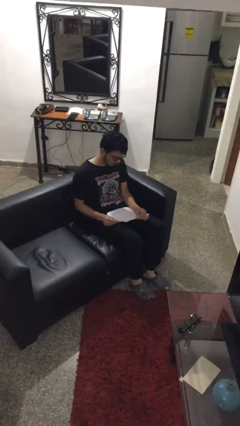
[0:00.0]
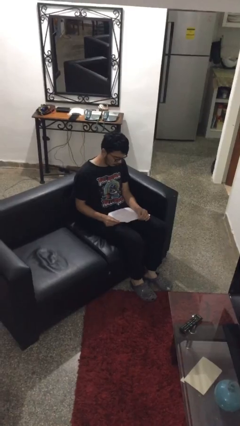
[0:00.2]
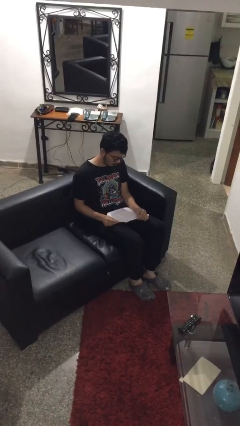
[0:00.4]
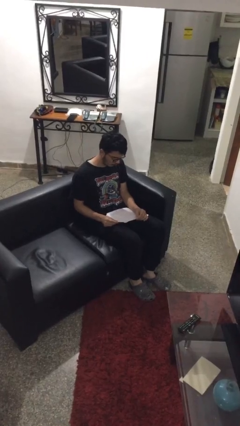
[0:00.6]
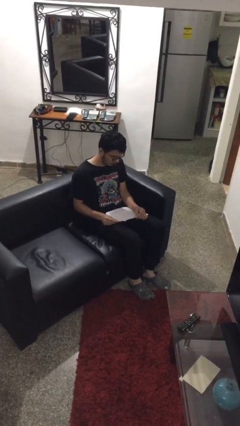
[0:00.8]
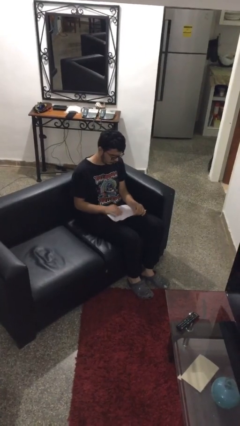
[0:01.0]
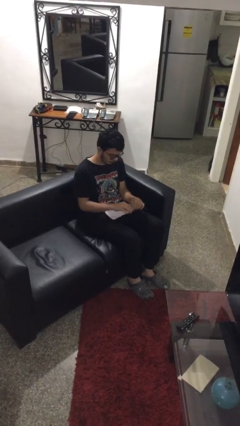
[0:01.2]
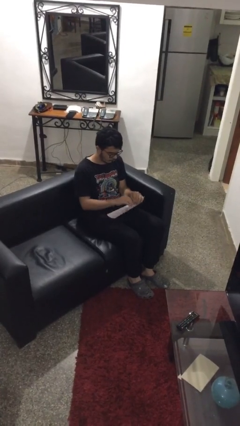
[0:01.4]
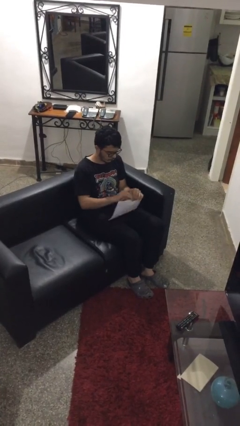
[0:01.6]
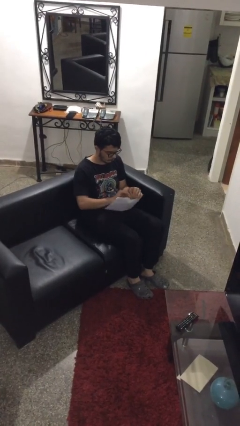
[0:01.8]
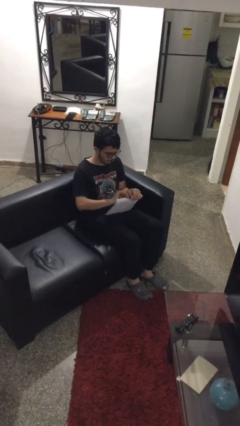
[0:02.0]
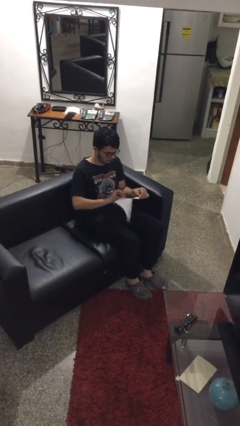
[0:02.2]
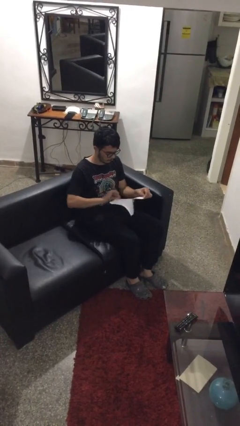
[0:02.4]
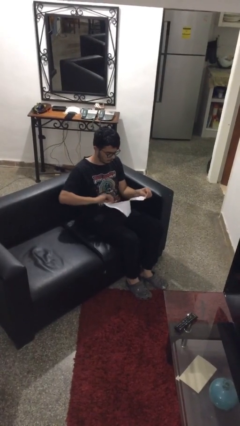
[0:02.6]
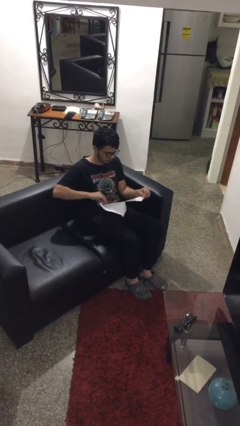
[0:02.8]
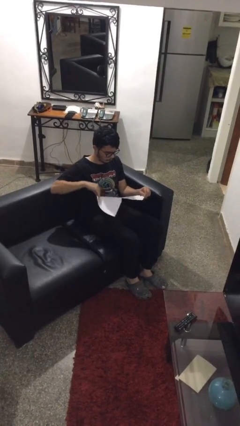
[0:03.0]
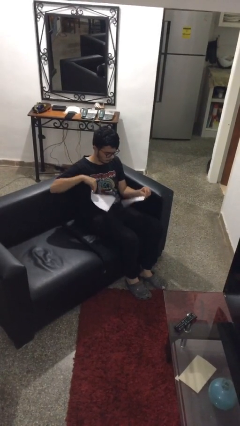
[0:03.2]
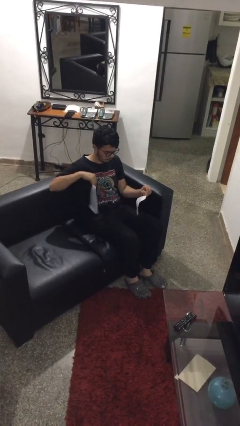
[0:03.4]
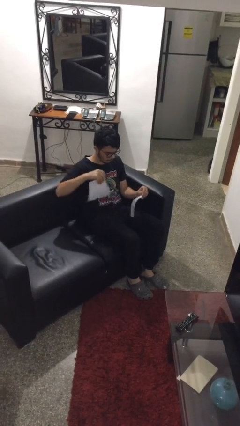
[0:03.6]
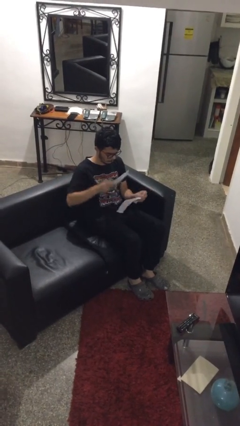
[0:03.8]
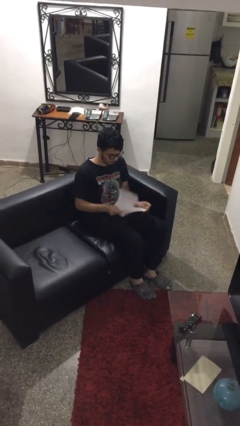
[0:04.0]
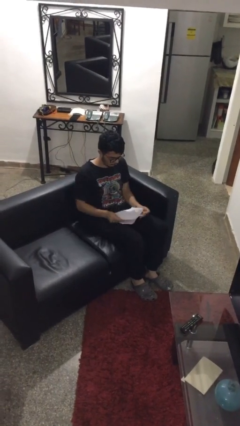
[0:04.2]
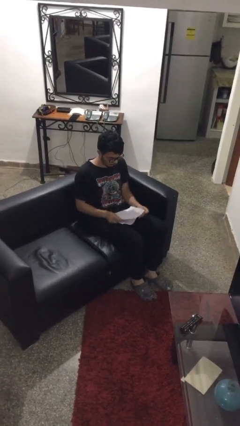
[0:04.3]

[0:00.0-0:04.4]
person tears paper

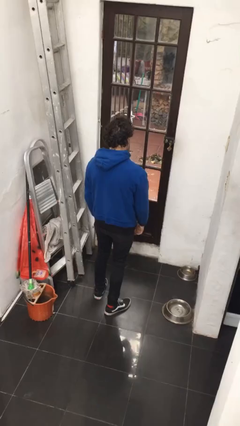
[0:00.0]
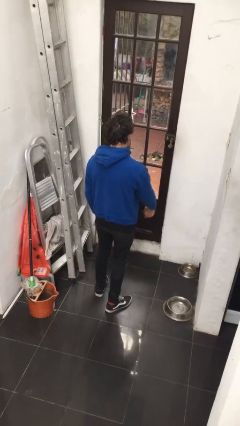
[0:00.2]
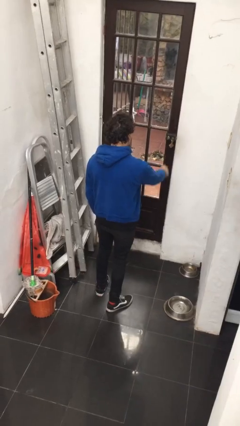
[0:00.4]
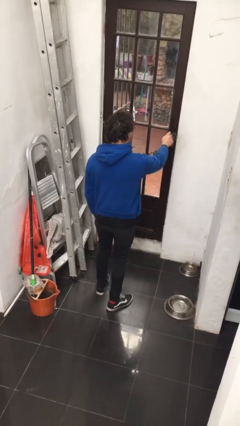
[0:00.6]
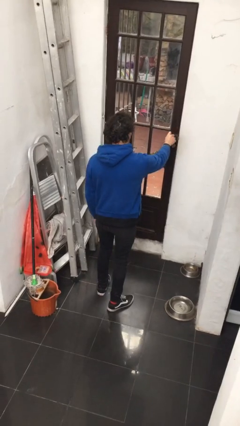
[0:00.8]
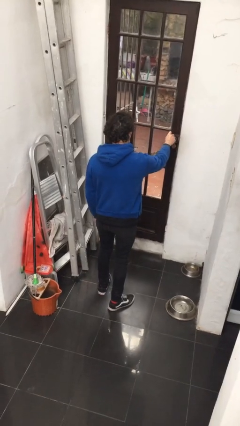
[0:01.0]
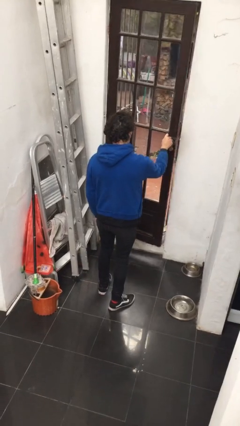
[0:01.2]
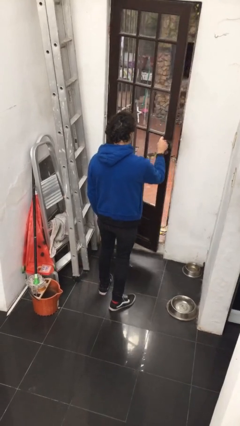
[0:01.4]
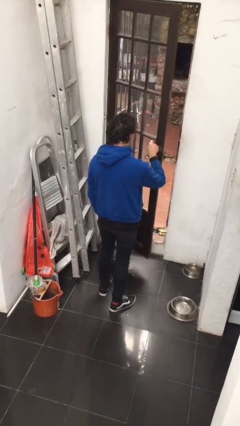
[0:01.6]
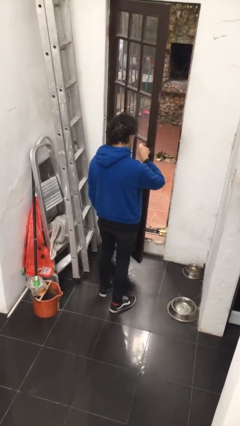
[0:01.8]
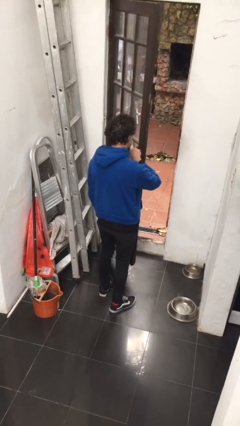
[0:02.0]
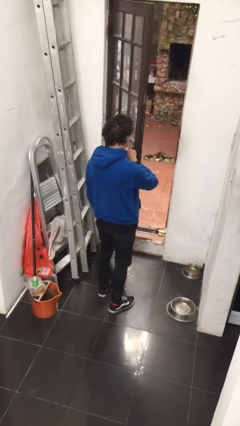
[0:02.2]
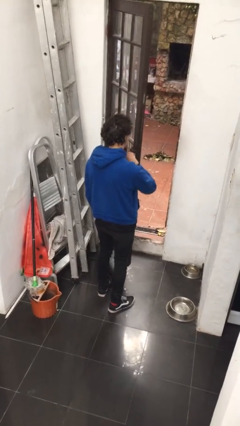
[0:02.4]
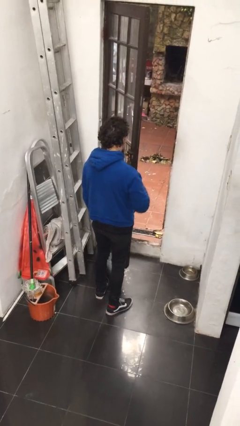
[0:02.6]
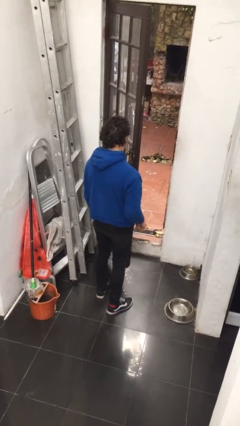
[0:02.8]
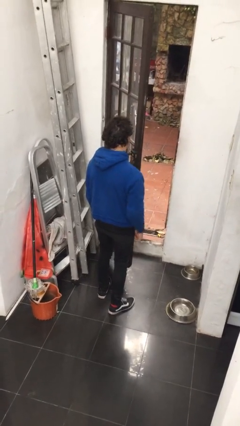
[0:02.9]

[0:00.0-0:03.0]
person opens facility door

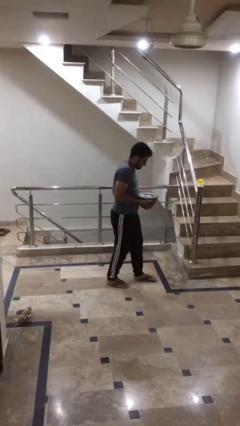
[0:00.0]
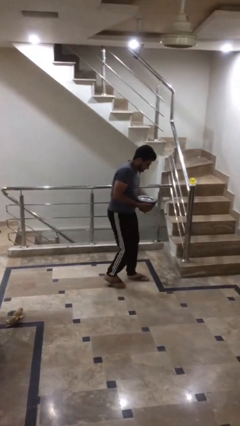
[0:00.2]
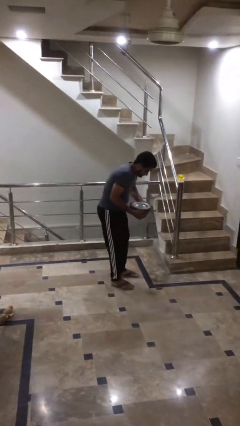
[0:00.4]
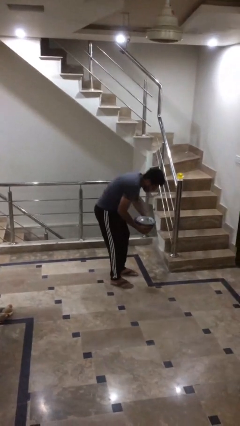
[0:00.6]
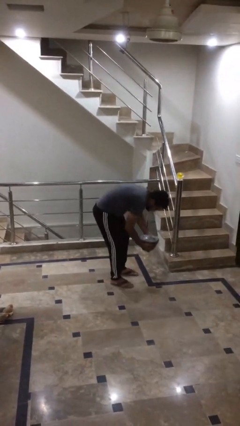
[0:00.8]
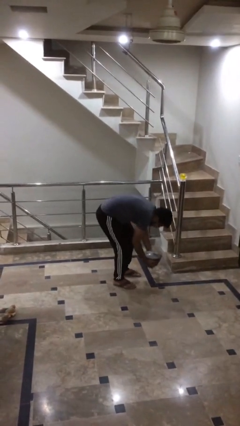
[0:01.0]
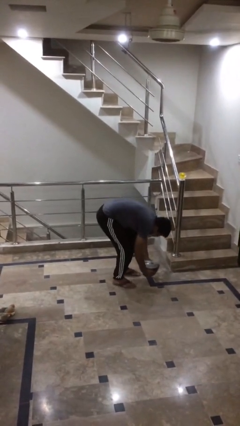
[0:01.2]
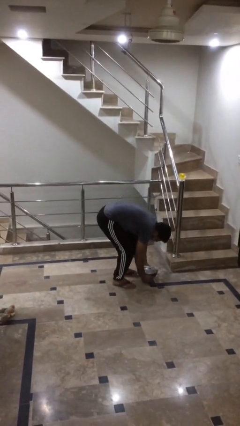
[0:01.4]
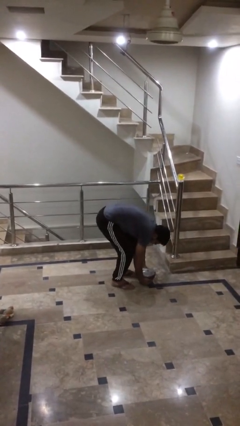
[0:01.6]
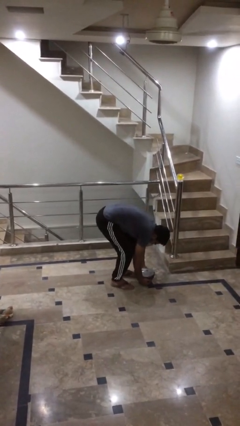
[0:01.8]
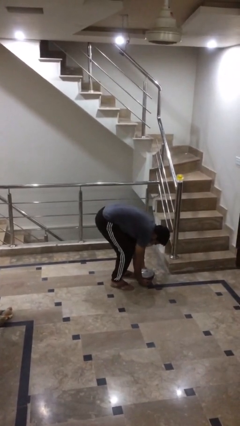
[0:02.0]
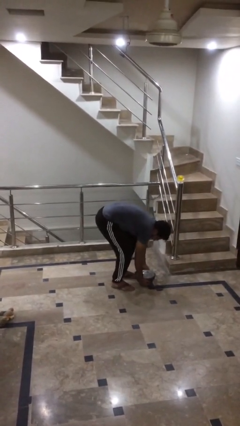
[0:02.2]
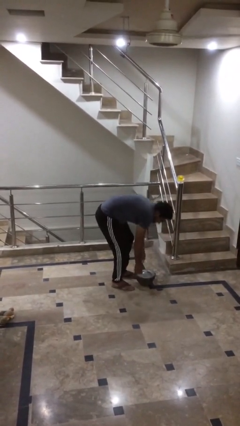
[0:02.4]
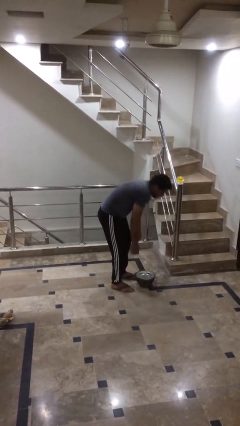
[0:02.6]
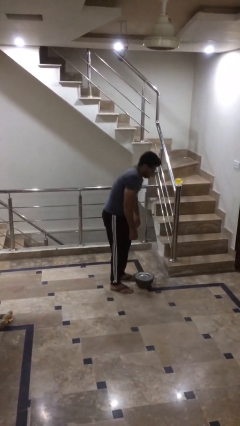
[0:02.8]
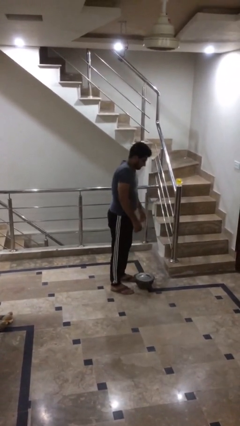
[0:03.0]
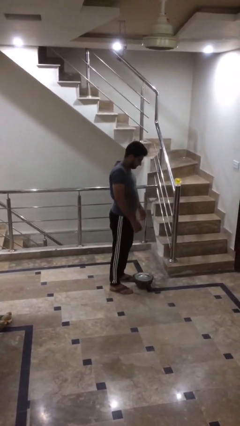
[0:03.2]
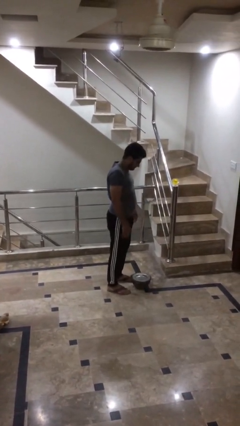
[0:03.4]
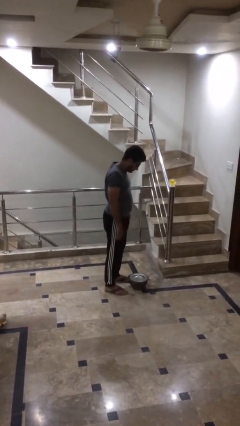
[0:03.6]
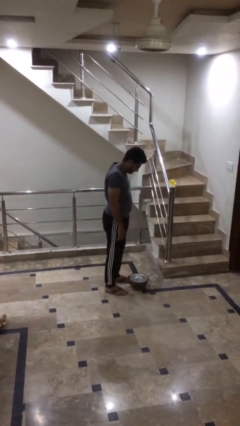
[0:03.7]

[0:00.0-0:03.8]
person puts down object on floor

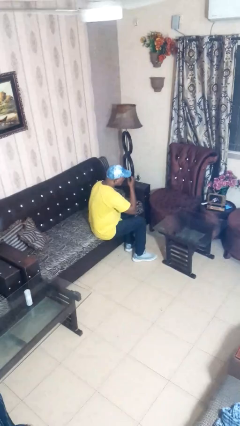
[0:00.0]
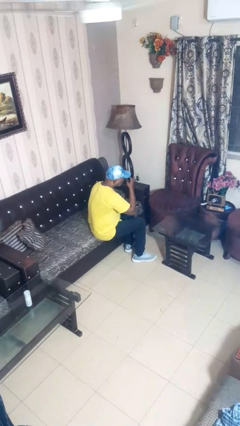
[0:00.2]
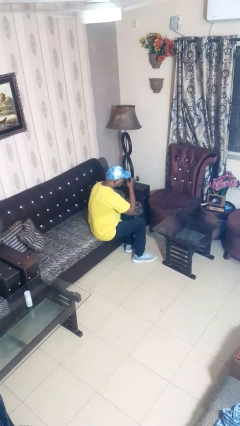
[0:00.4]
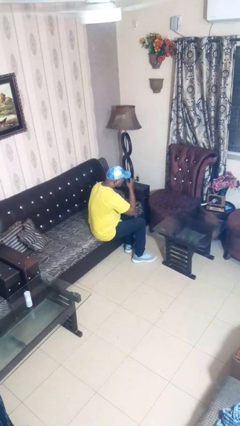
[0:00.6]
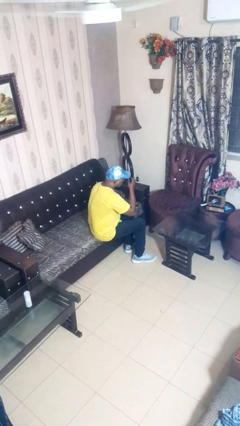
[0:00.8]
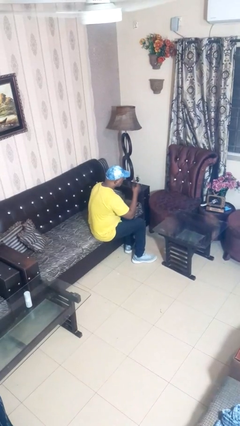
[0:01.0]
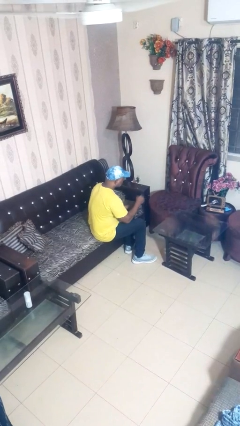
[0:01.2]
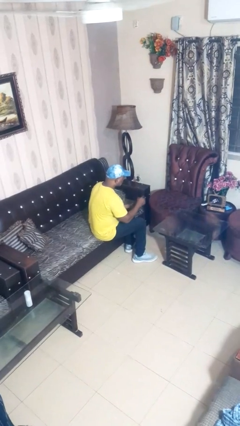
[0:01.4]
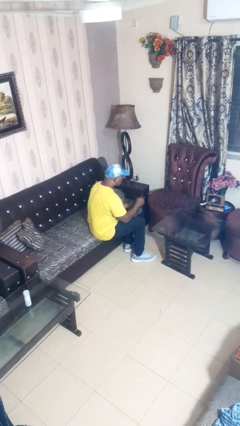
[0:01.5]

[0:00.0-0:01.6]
person applies eye makeup

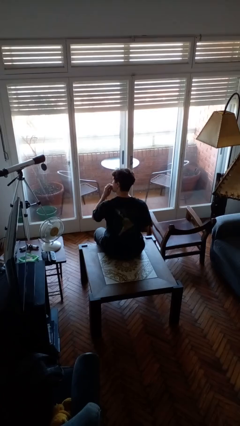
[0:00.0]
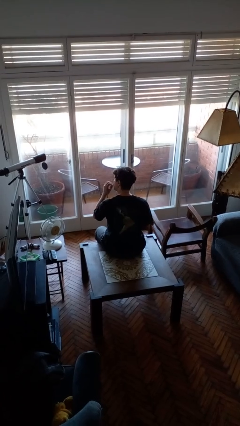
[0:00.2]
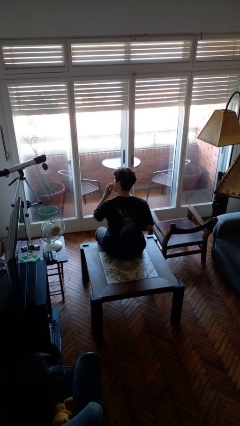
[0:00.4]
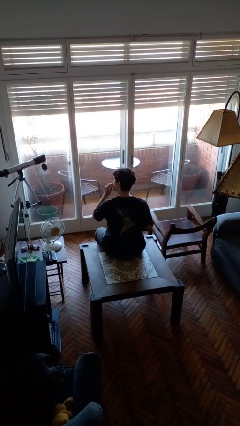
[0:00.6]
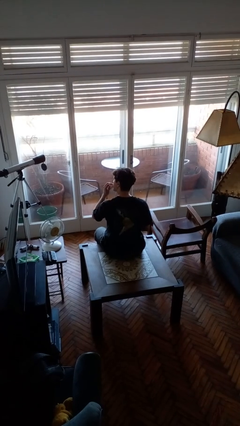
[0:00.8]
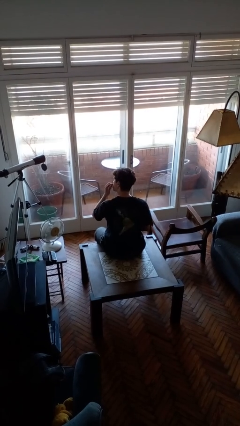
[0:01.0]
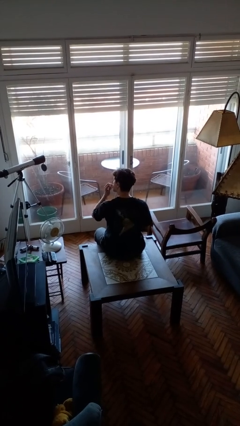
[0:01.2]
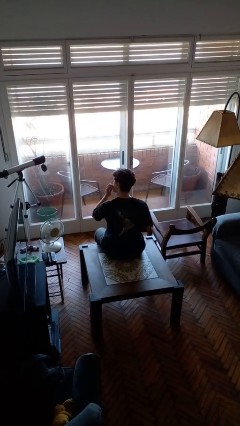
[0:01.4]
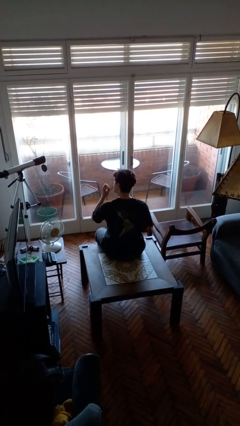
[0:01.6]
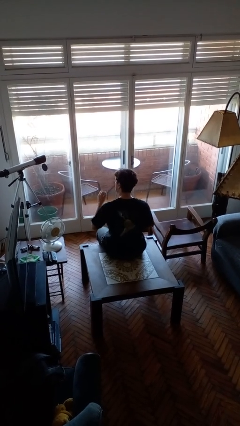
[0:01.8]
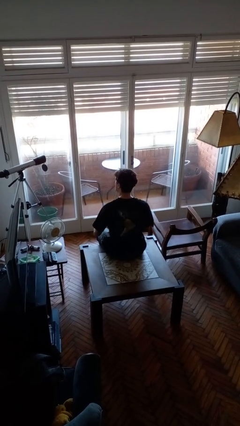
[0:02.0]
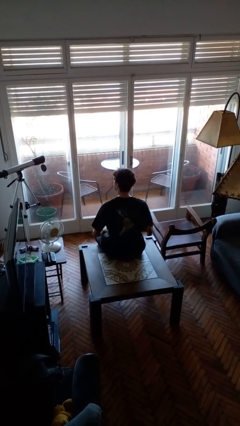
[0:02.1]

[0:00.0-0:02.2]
person licks fingers

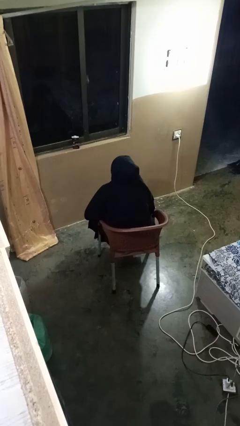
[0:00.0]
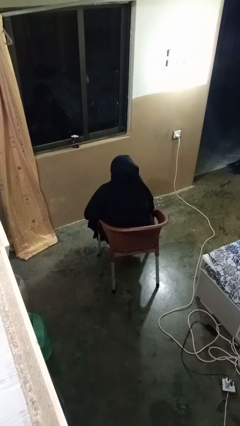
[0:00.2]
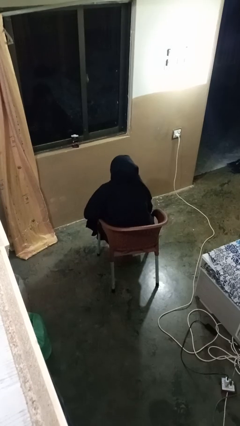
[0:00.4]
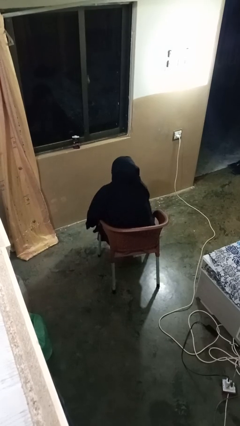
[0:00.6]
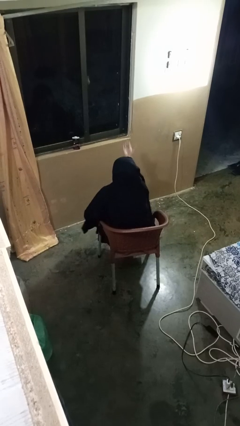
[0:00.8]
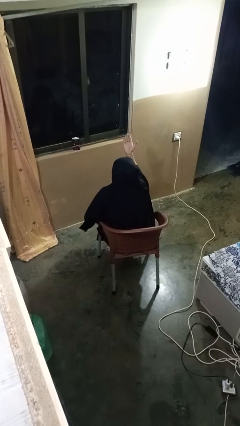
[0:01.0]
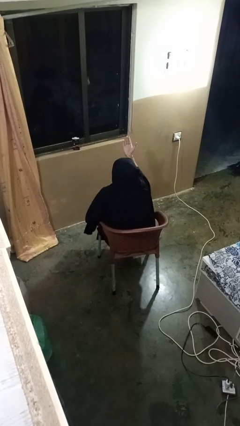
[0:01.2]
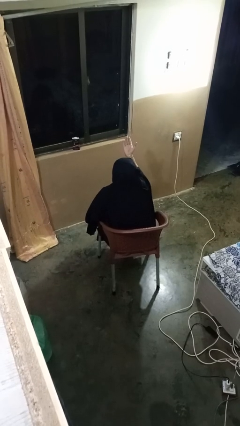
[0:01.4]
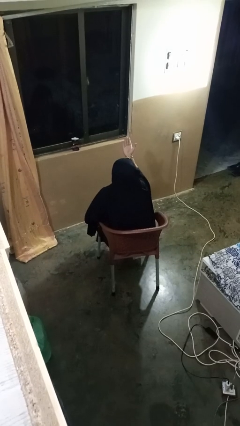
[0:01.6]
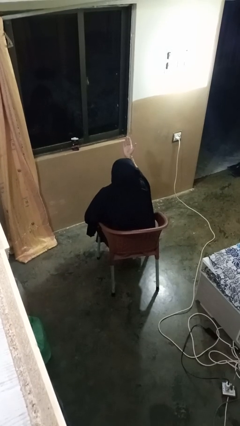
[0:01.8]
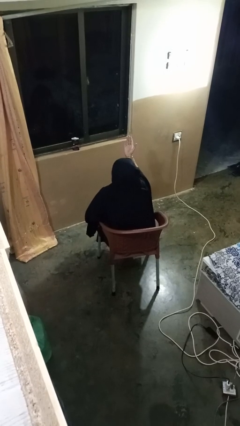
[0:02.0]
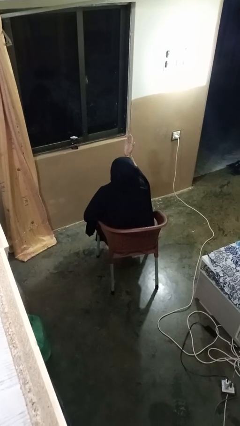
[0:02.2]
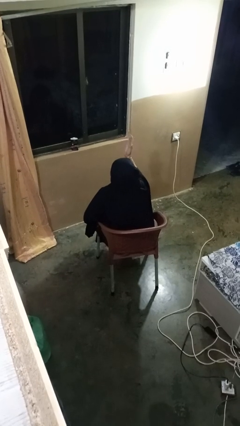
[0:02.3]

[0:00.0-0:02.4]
person gestures swipe up
